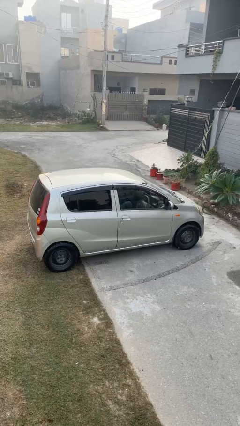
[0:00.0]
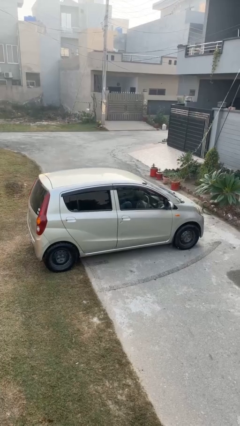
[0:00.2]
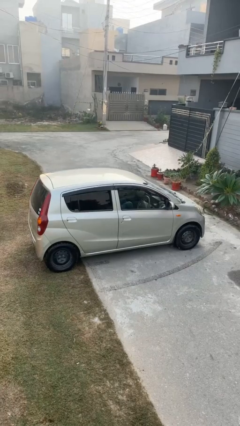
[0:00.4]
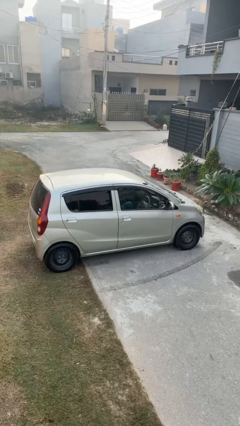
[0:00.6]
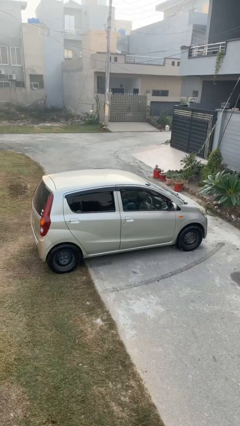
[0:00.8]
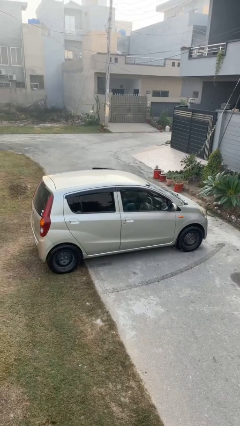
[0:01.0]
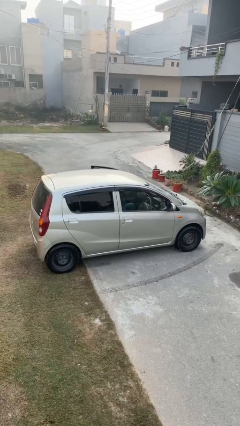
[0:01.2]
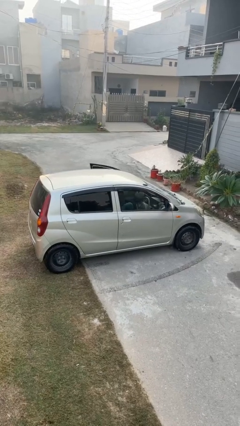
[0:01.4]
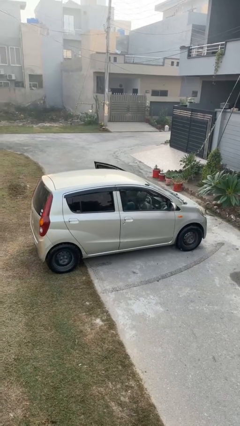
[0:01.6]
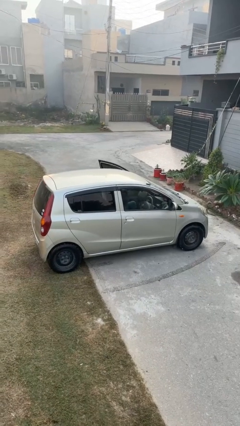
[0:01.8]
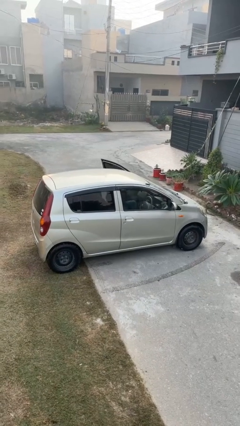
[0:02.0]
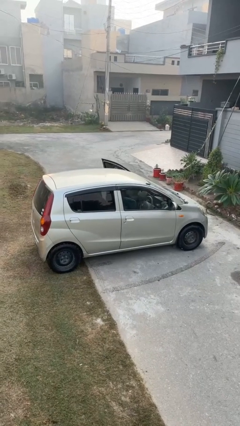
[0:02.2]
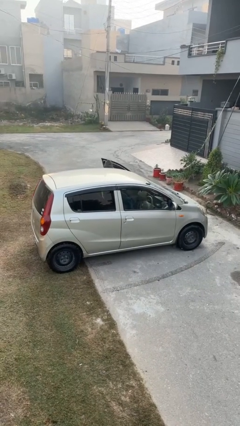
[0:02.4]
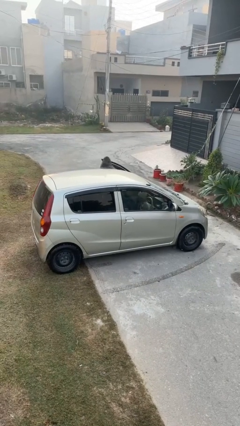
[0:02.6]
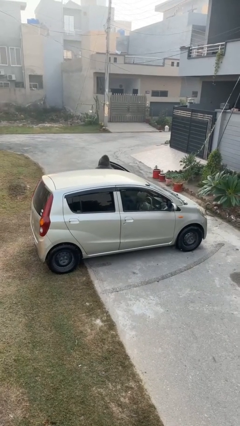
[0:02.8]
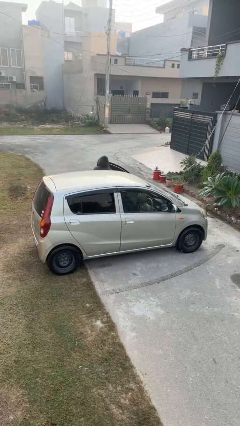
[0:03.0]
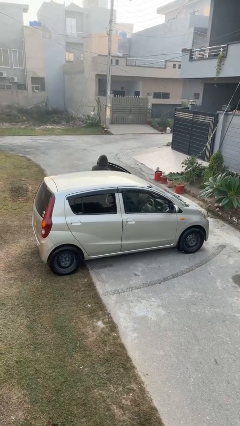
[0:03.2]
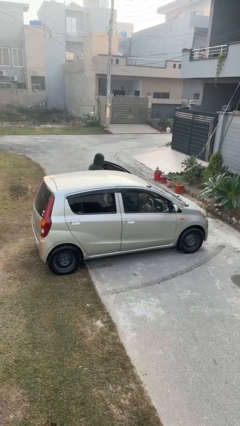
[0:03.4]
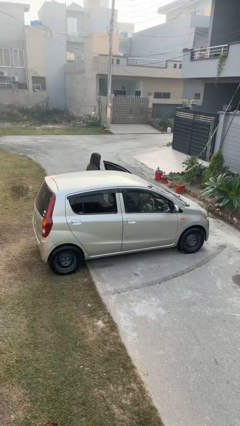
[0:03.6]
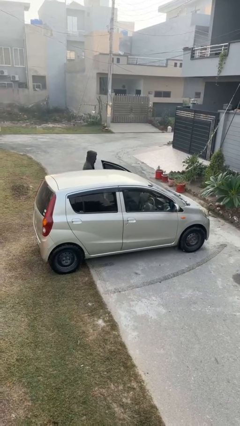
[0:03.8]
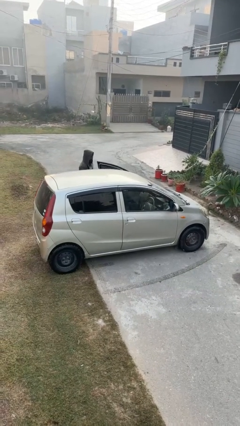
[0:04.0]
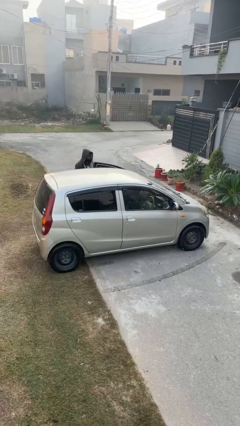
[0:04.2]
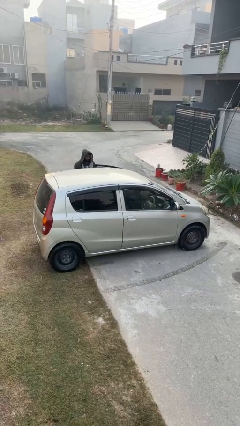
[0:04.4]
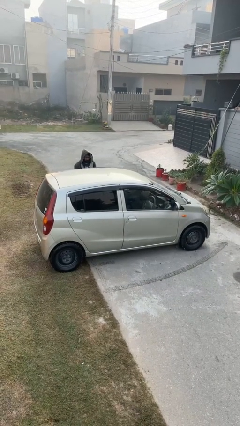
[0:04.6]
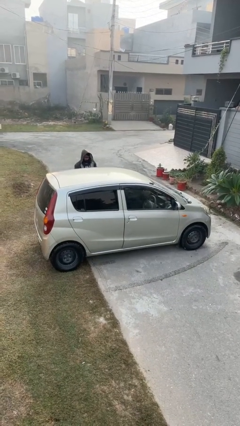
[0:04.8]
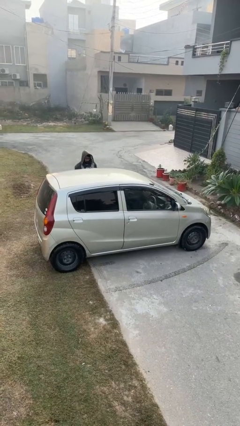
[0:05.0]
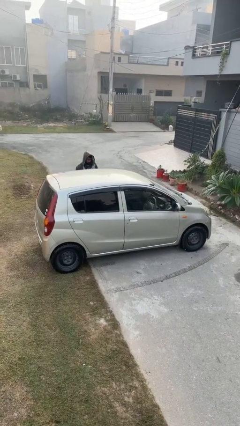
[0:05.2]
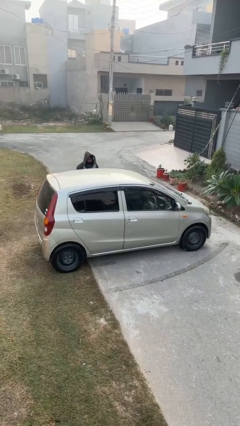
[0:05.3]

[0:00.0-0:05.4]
car drops off person

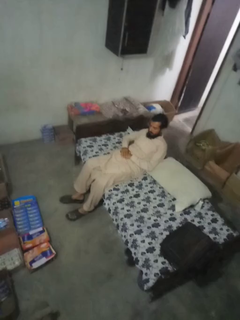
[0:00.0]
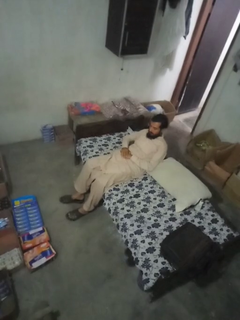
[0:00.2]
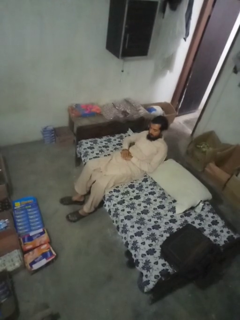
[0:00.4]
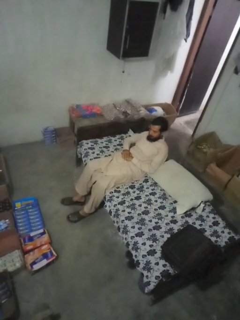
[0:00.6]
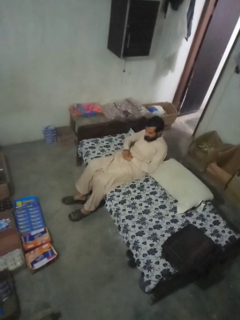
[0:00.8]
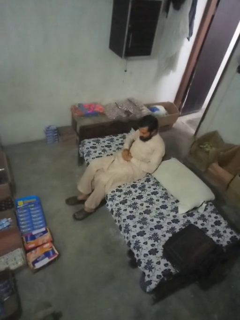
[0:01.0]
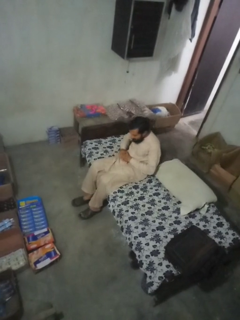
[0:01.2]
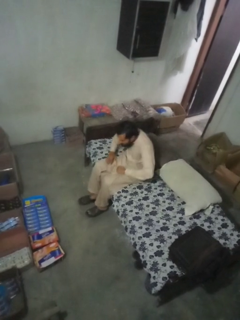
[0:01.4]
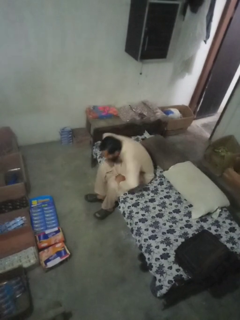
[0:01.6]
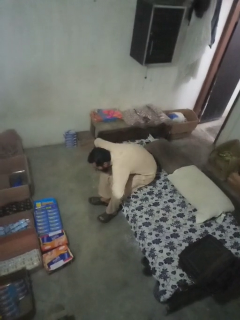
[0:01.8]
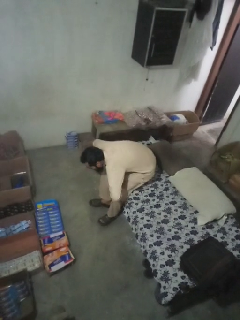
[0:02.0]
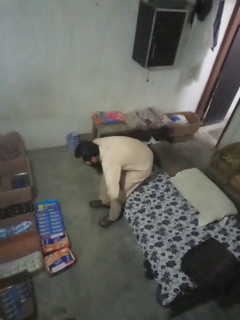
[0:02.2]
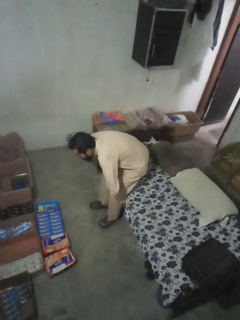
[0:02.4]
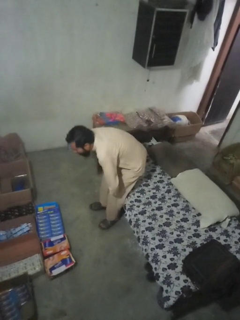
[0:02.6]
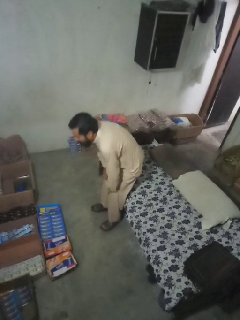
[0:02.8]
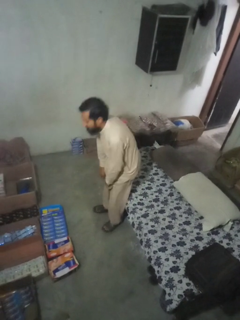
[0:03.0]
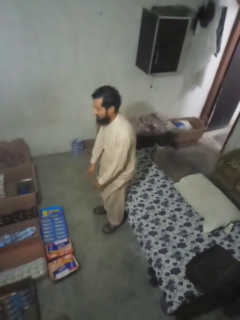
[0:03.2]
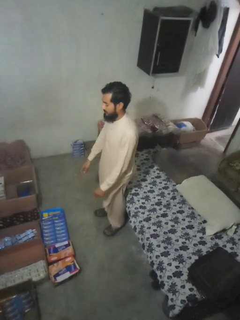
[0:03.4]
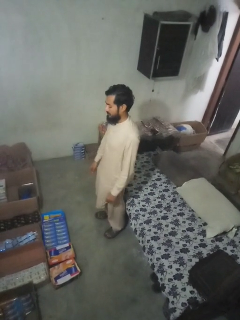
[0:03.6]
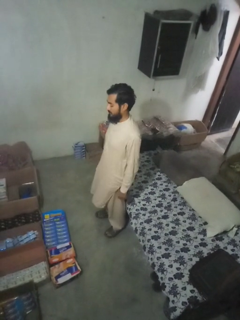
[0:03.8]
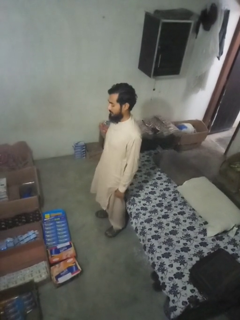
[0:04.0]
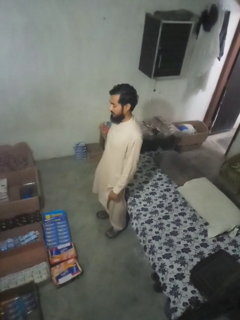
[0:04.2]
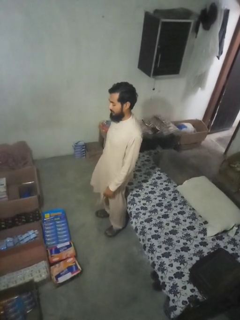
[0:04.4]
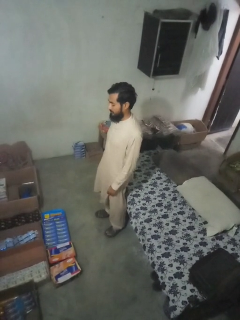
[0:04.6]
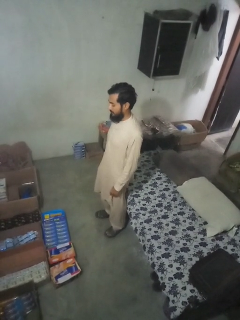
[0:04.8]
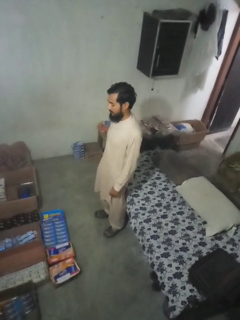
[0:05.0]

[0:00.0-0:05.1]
person stands up

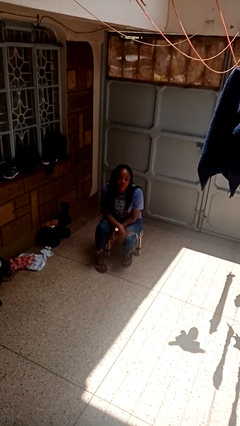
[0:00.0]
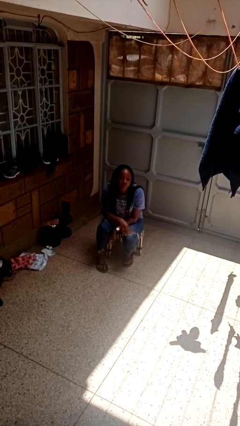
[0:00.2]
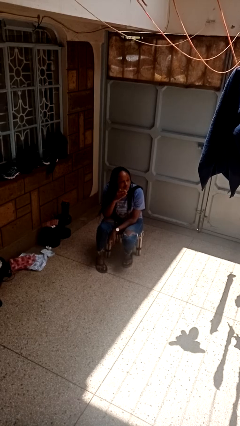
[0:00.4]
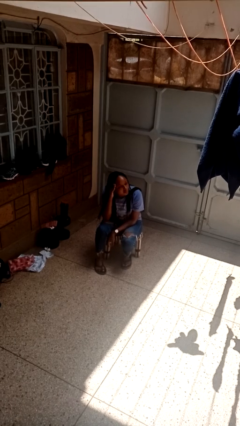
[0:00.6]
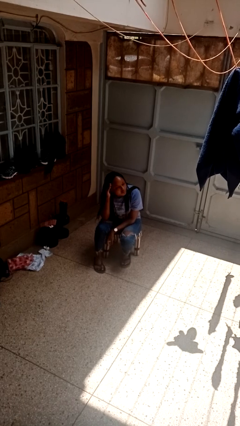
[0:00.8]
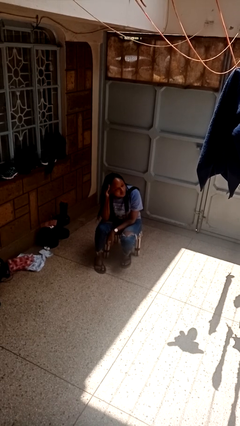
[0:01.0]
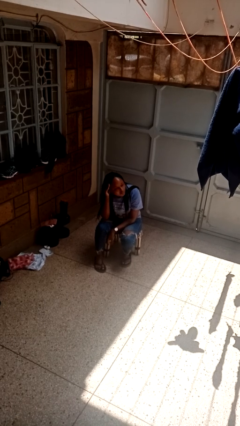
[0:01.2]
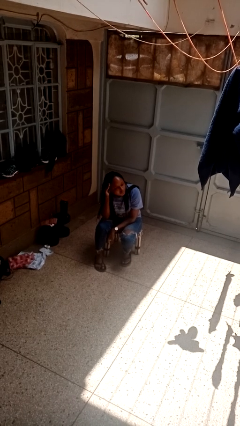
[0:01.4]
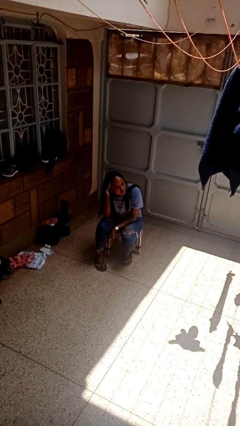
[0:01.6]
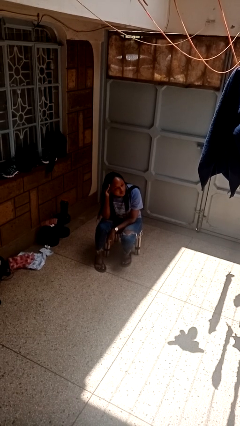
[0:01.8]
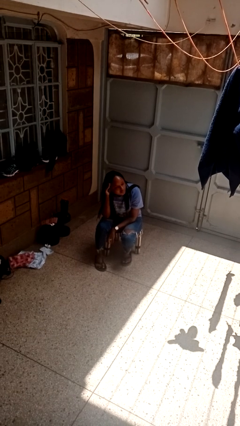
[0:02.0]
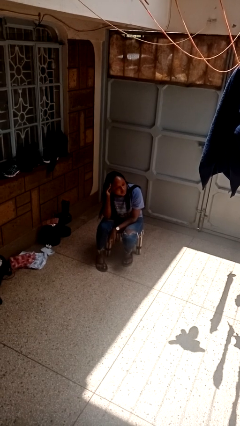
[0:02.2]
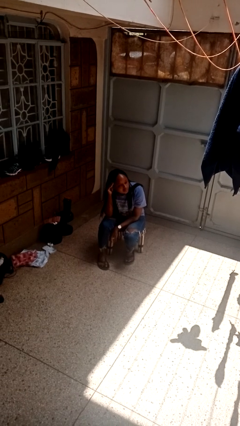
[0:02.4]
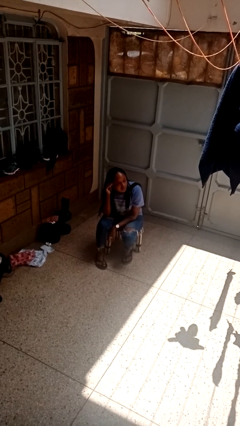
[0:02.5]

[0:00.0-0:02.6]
person gestures listen closely

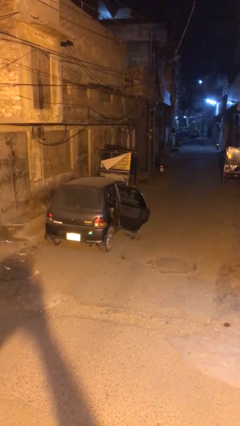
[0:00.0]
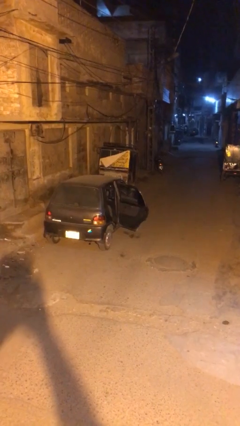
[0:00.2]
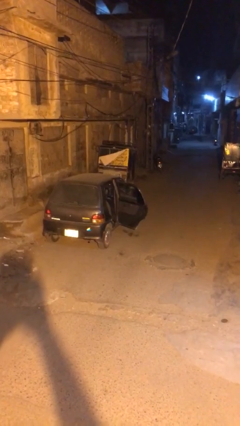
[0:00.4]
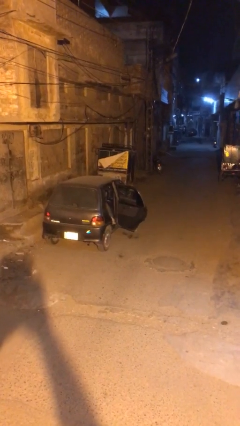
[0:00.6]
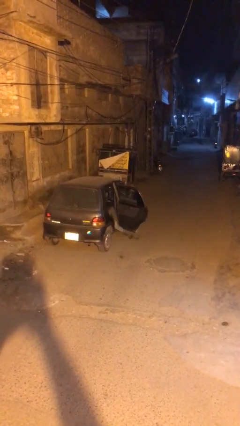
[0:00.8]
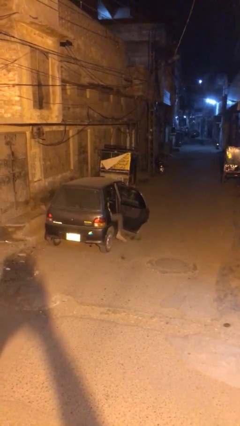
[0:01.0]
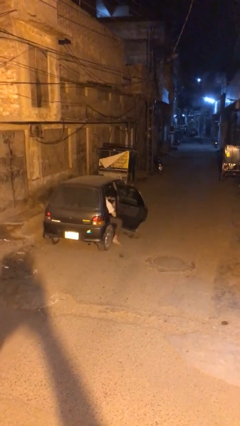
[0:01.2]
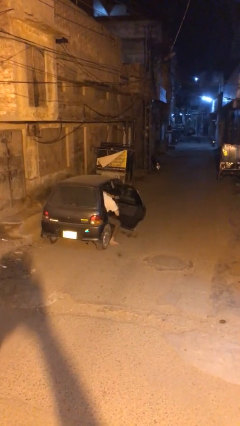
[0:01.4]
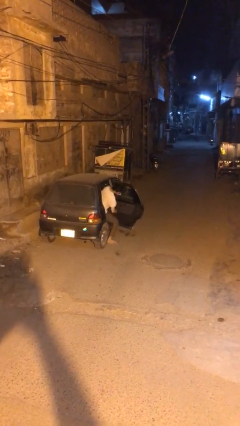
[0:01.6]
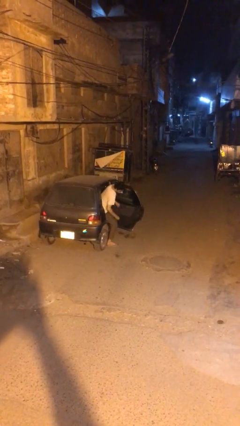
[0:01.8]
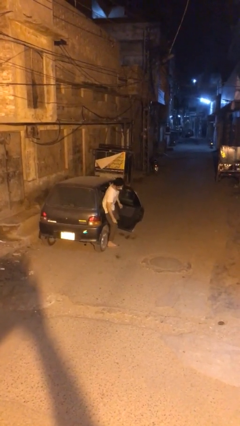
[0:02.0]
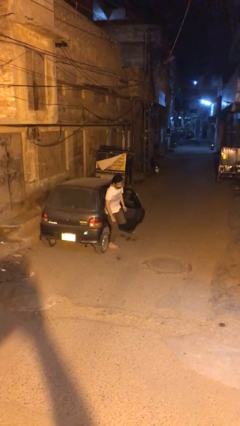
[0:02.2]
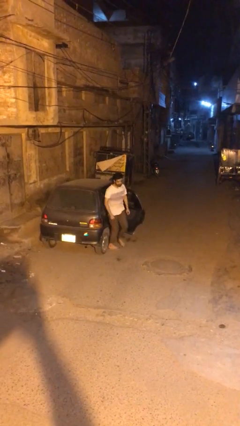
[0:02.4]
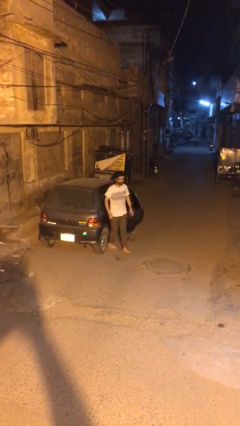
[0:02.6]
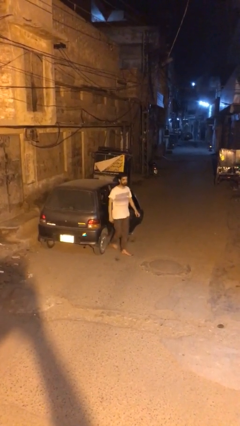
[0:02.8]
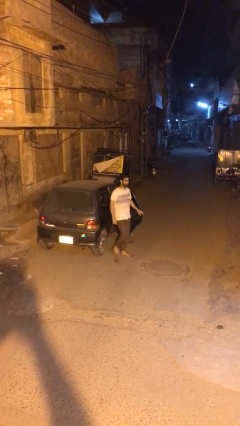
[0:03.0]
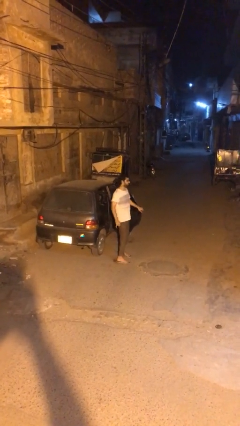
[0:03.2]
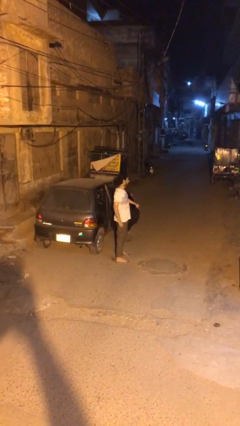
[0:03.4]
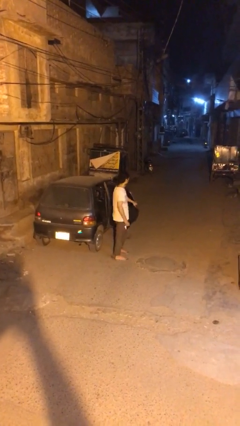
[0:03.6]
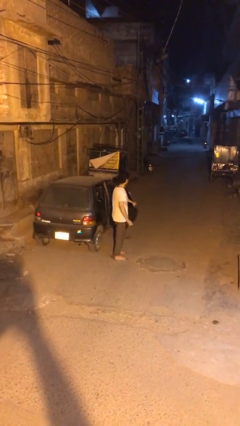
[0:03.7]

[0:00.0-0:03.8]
person exits car

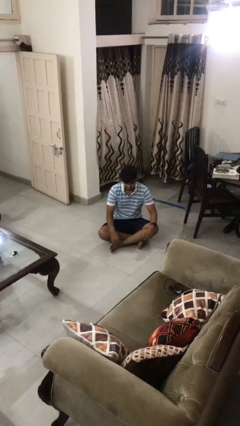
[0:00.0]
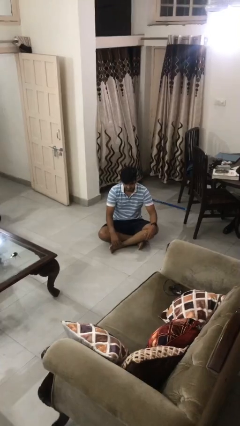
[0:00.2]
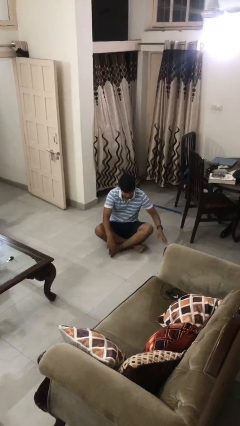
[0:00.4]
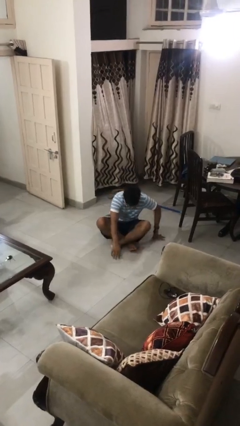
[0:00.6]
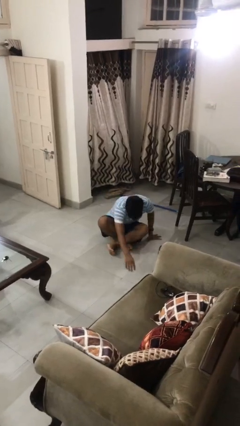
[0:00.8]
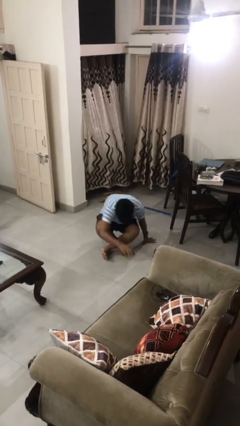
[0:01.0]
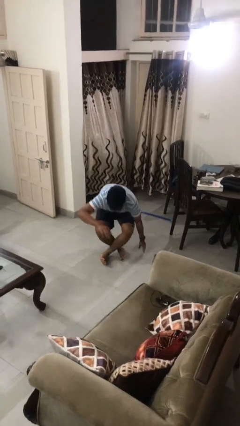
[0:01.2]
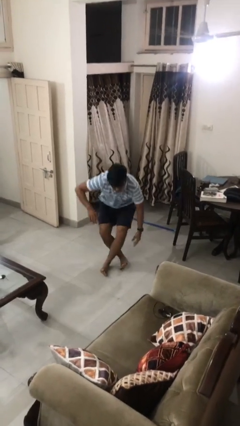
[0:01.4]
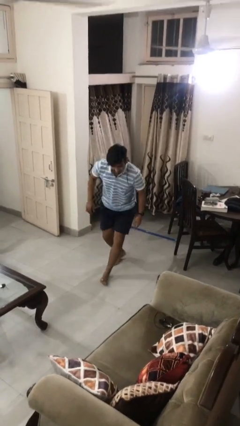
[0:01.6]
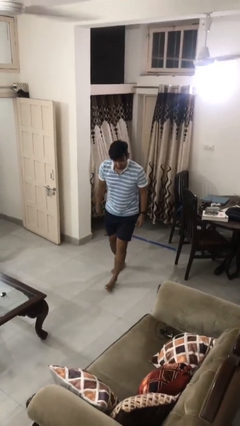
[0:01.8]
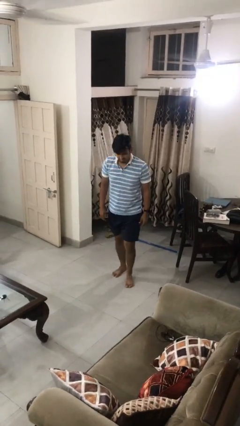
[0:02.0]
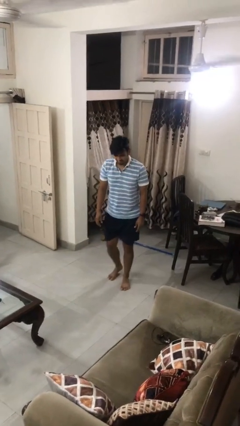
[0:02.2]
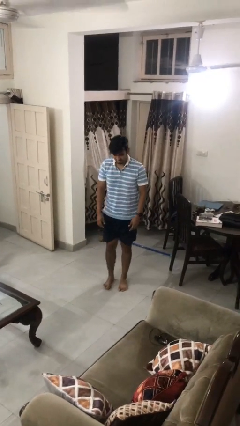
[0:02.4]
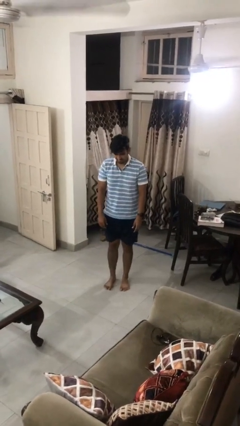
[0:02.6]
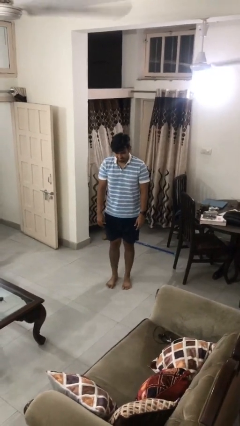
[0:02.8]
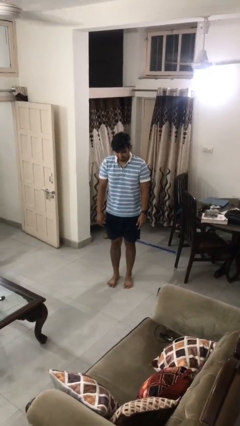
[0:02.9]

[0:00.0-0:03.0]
person stands up from floor
